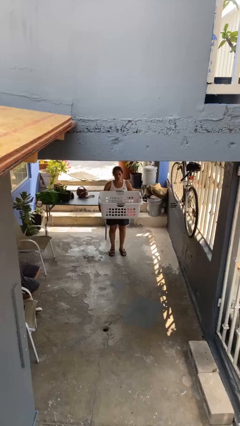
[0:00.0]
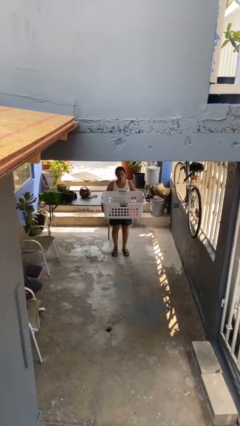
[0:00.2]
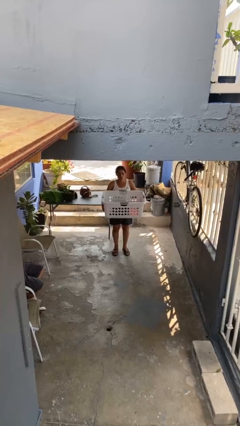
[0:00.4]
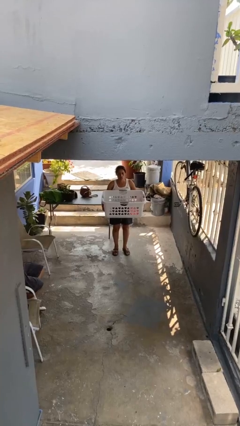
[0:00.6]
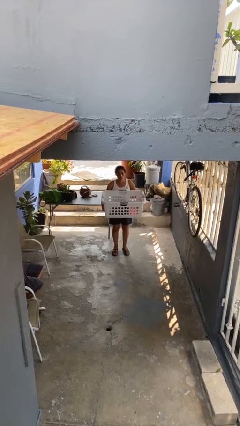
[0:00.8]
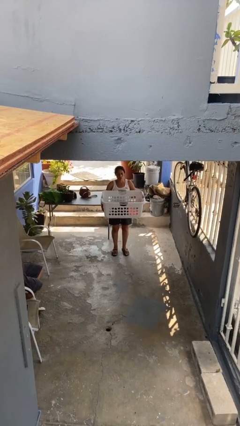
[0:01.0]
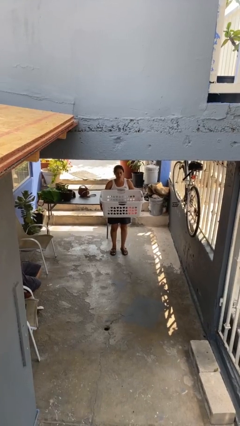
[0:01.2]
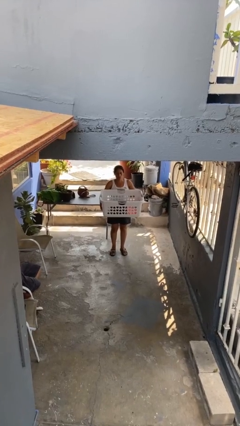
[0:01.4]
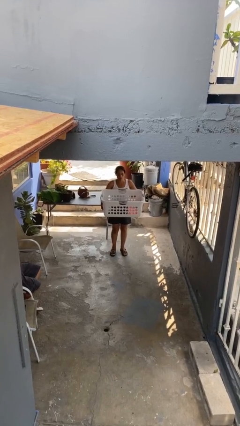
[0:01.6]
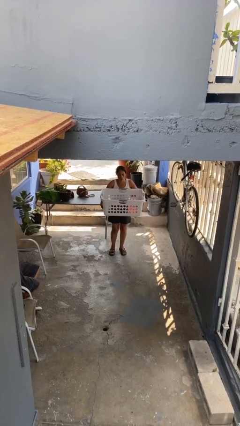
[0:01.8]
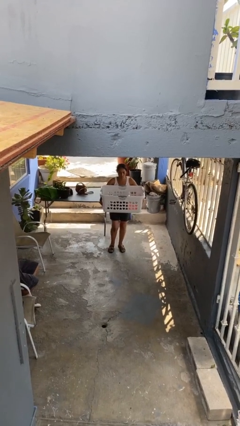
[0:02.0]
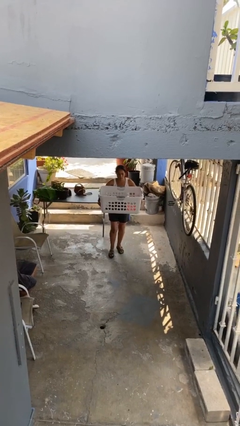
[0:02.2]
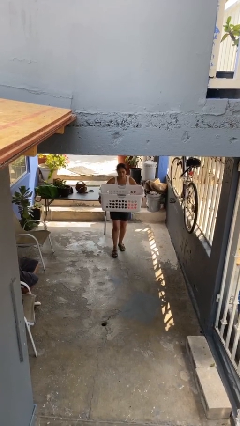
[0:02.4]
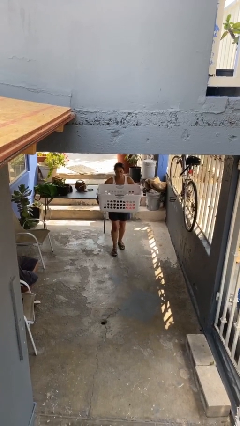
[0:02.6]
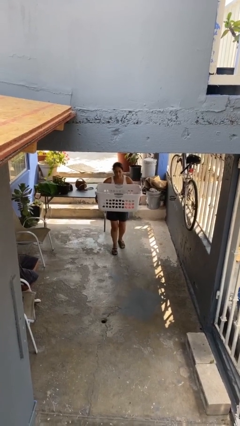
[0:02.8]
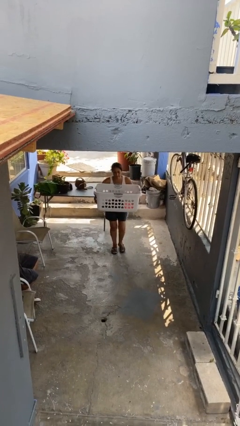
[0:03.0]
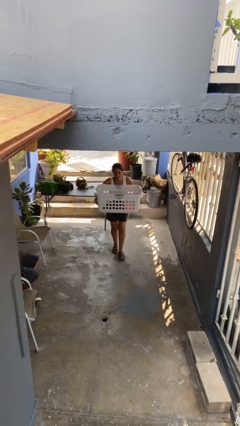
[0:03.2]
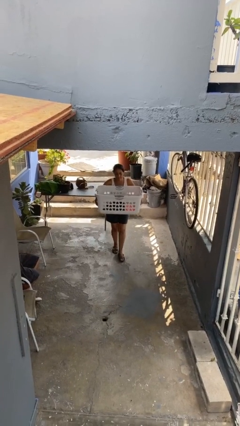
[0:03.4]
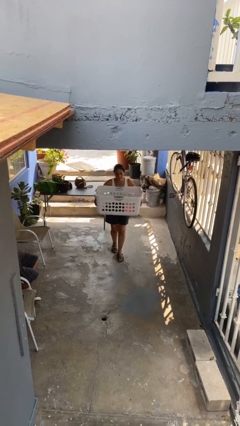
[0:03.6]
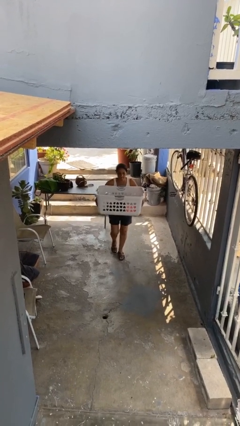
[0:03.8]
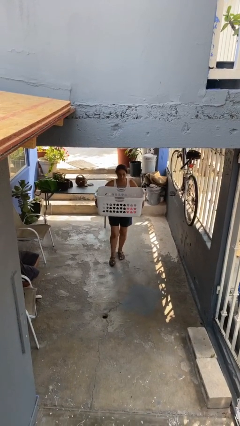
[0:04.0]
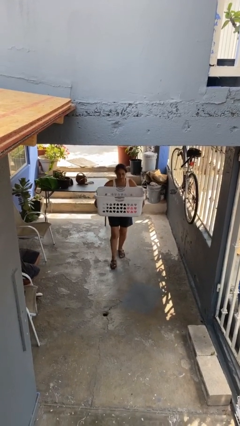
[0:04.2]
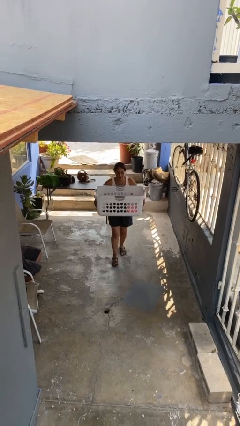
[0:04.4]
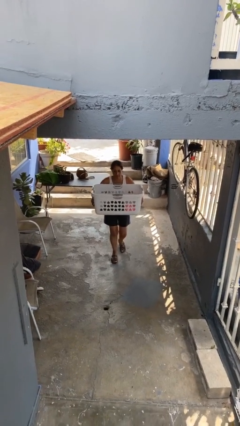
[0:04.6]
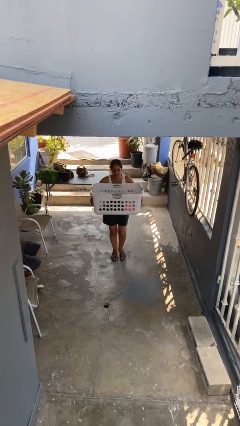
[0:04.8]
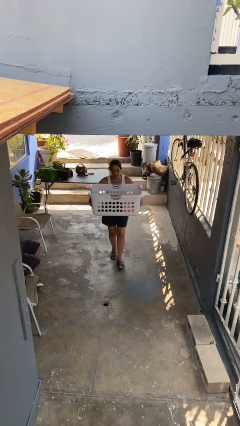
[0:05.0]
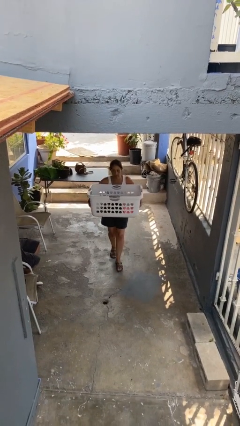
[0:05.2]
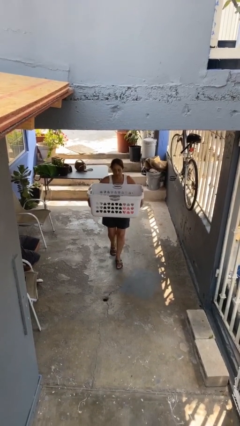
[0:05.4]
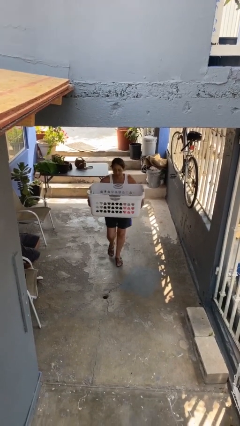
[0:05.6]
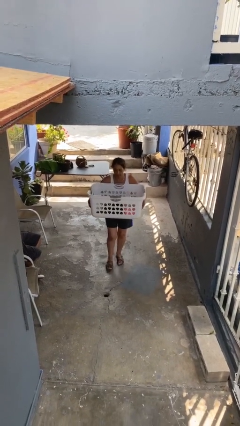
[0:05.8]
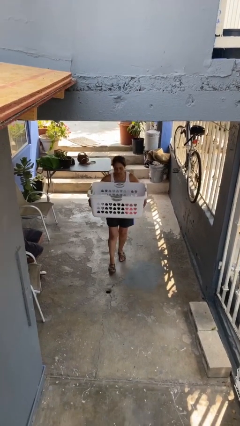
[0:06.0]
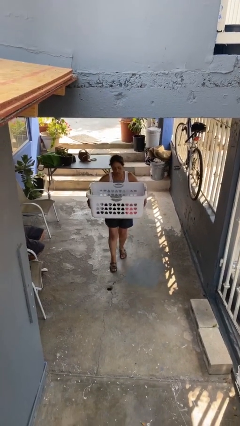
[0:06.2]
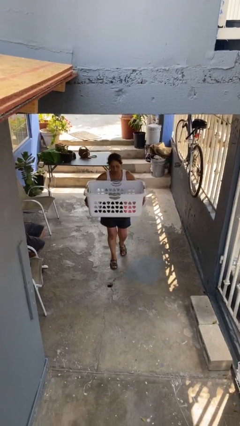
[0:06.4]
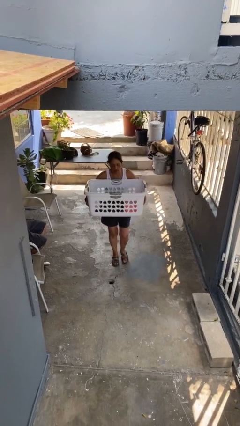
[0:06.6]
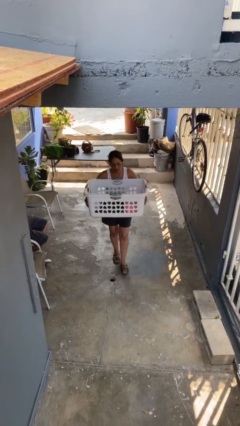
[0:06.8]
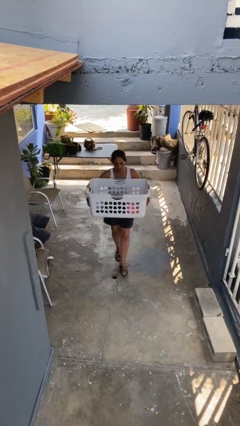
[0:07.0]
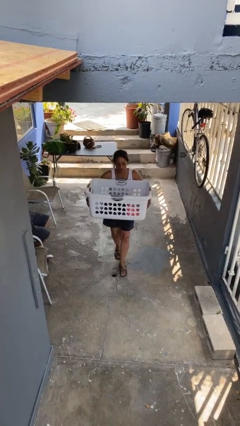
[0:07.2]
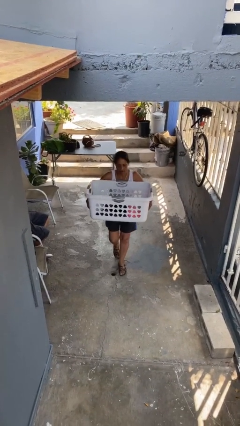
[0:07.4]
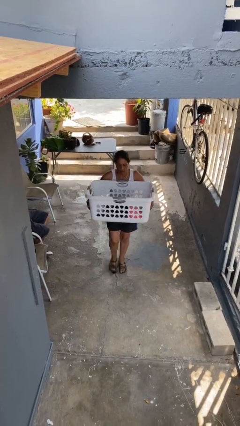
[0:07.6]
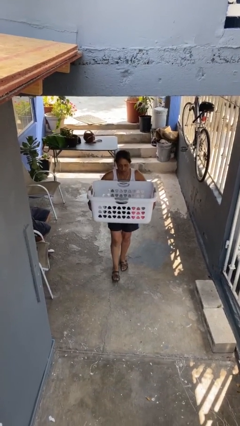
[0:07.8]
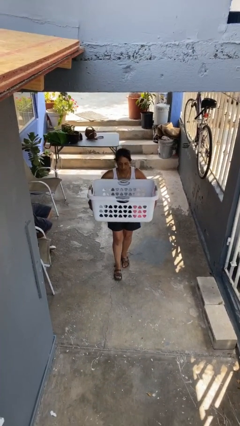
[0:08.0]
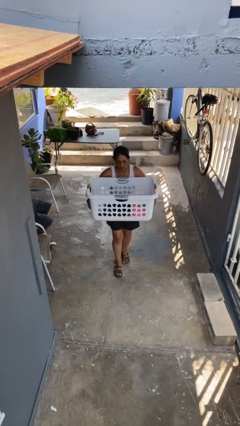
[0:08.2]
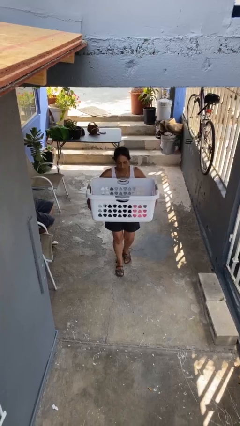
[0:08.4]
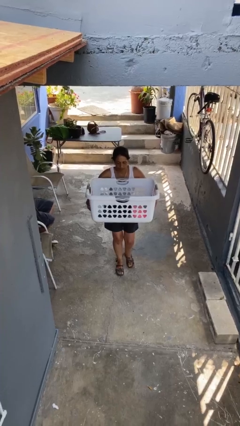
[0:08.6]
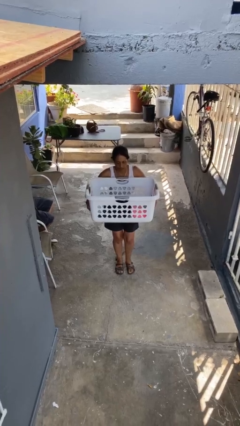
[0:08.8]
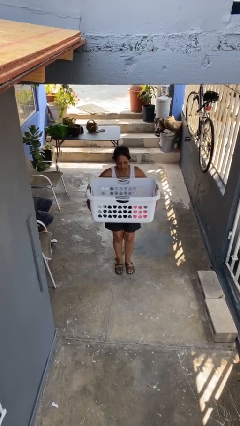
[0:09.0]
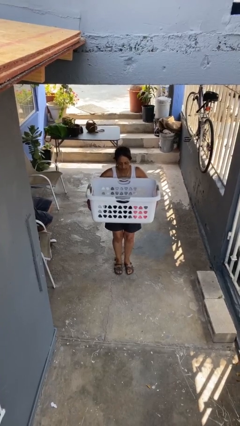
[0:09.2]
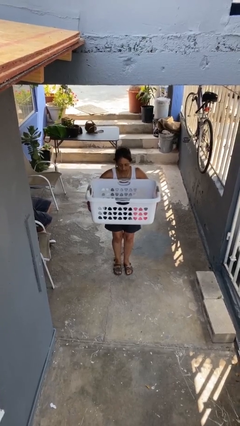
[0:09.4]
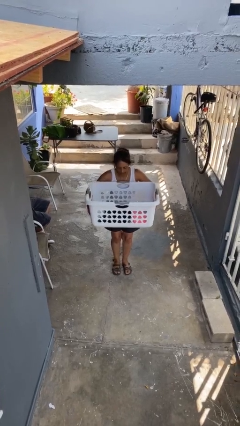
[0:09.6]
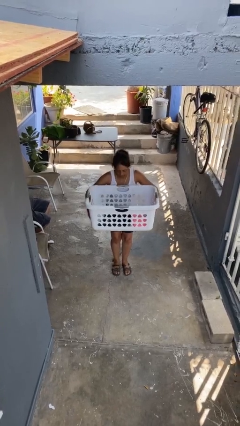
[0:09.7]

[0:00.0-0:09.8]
person carries heavy object

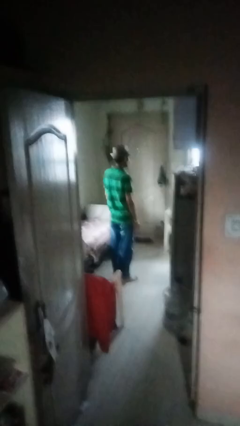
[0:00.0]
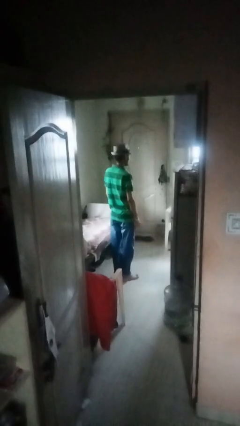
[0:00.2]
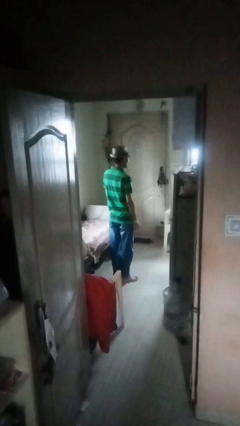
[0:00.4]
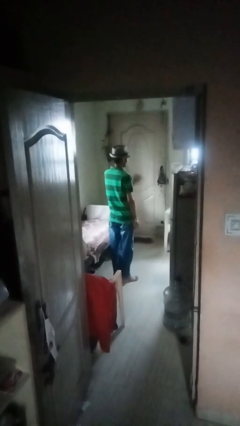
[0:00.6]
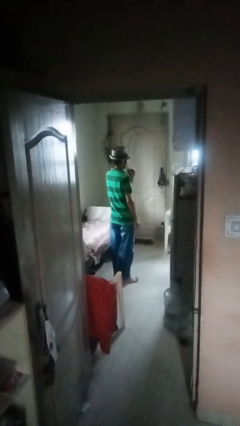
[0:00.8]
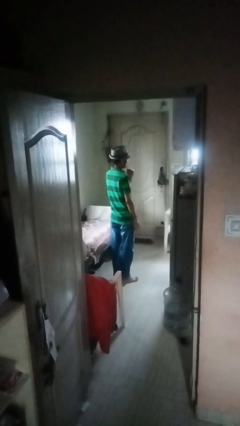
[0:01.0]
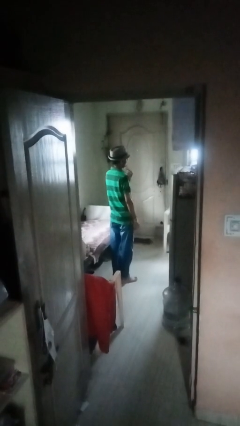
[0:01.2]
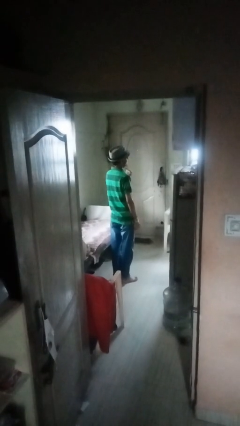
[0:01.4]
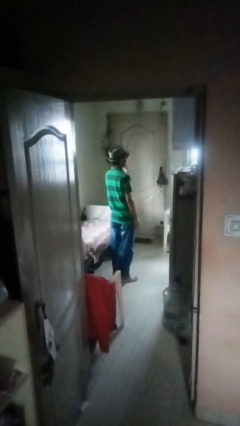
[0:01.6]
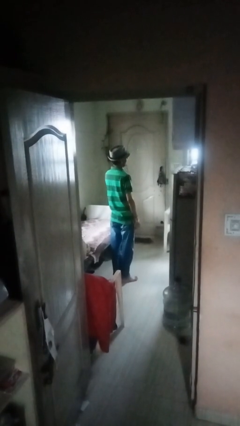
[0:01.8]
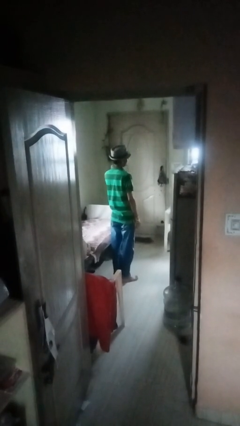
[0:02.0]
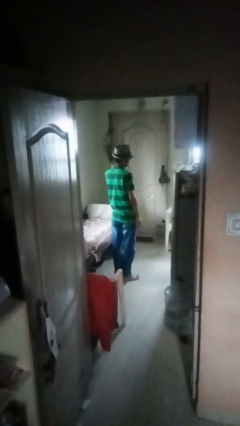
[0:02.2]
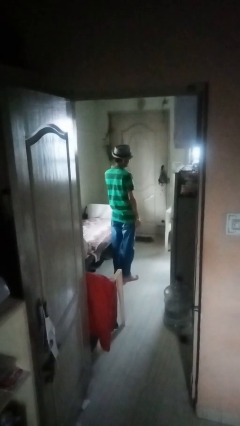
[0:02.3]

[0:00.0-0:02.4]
person gestures cut

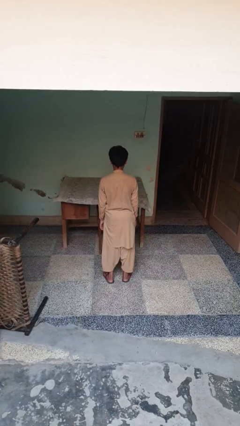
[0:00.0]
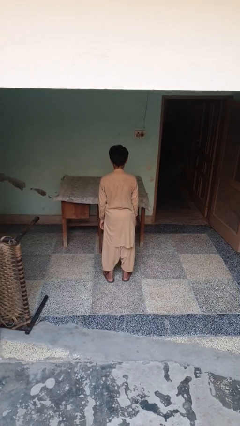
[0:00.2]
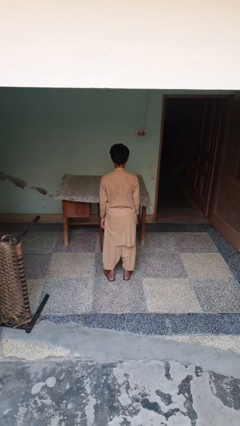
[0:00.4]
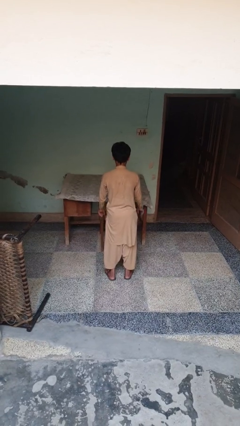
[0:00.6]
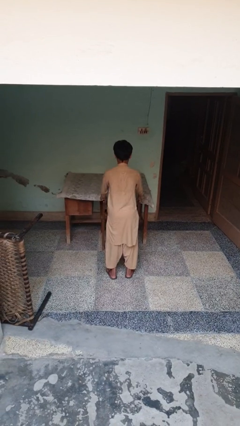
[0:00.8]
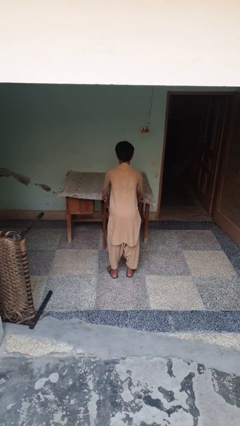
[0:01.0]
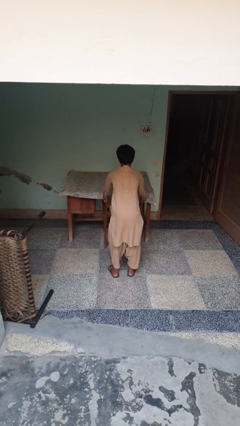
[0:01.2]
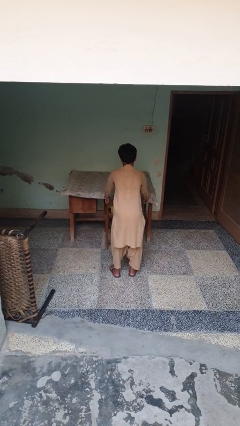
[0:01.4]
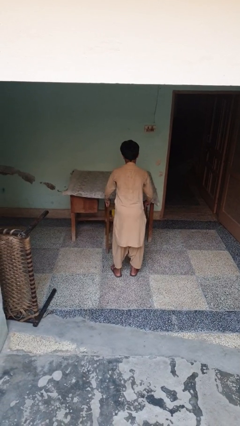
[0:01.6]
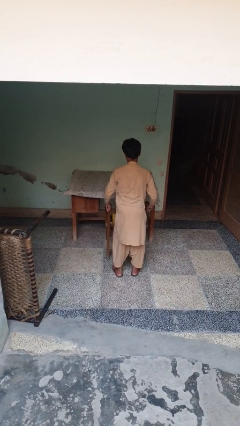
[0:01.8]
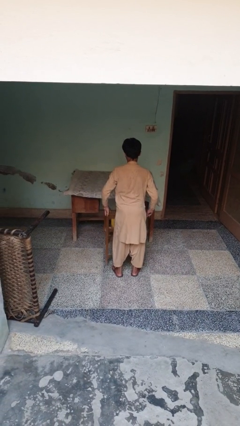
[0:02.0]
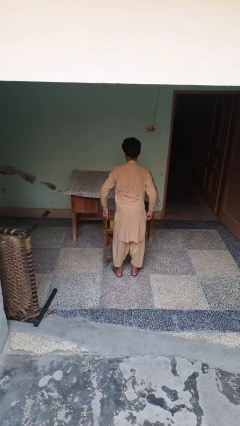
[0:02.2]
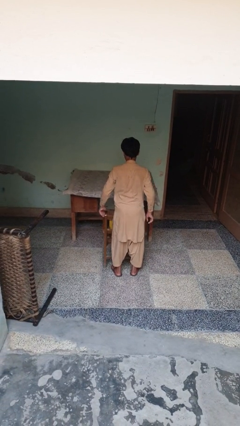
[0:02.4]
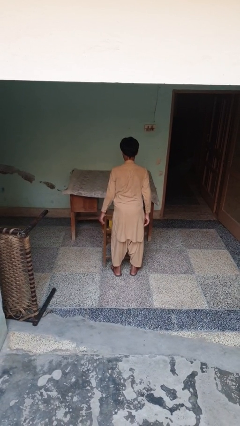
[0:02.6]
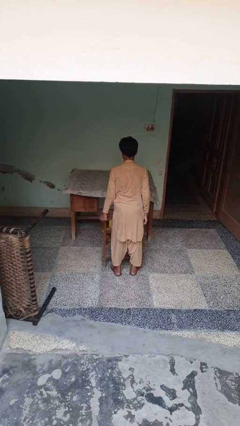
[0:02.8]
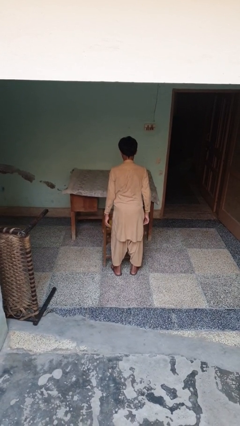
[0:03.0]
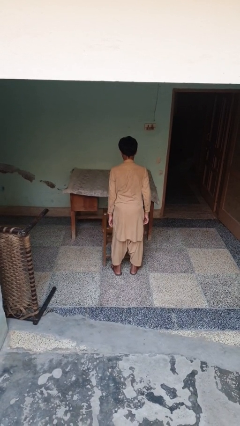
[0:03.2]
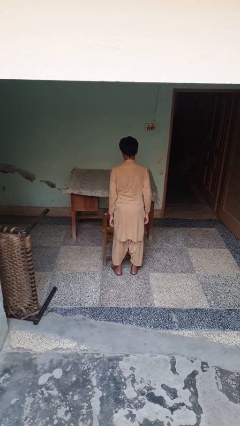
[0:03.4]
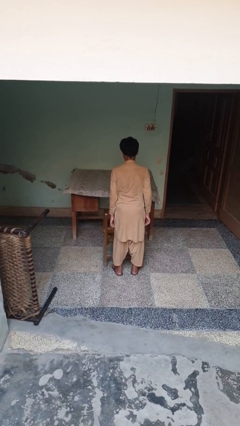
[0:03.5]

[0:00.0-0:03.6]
person pulls out chair

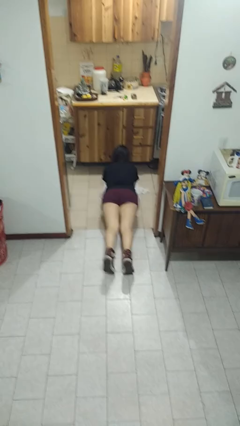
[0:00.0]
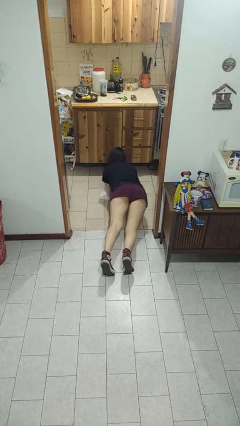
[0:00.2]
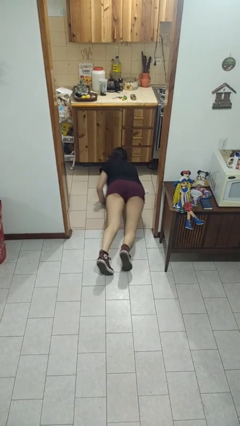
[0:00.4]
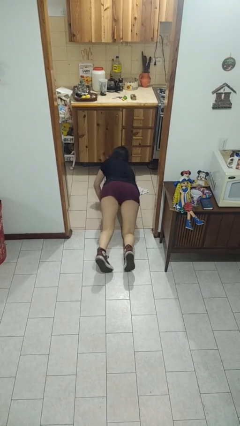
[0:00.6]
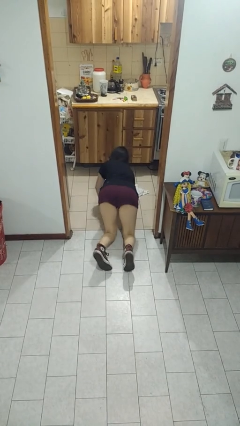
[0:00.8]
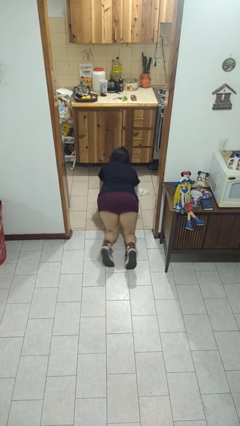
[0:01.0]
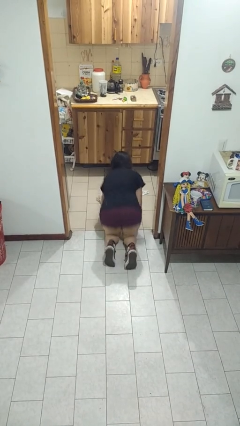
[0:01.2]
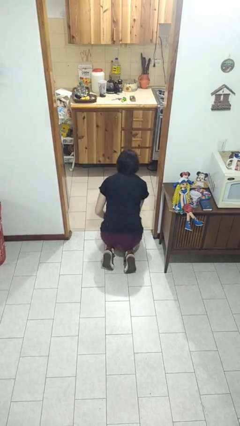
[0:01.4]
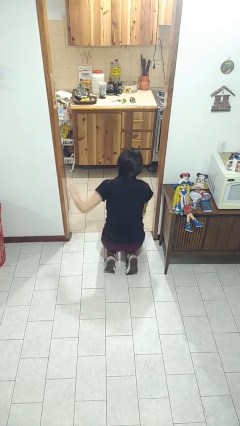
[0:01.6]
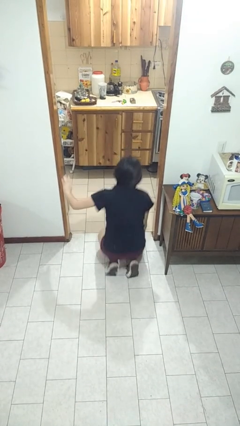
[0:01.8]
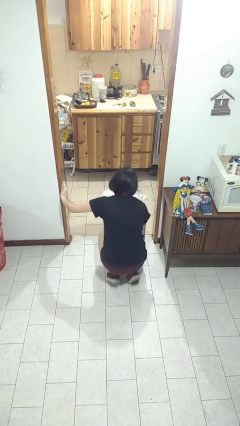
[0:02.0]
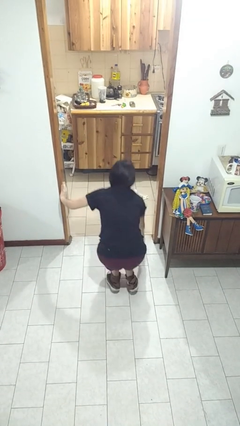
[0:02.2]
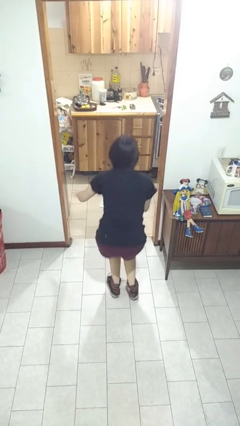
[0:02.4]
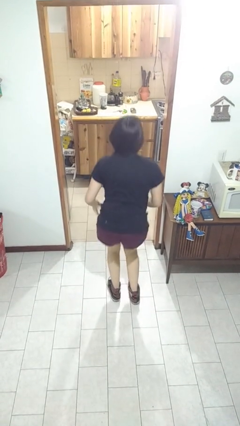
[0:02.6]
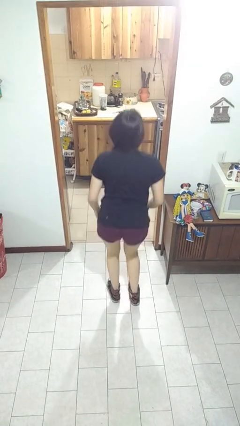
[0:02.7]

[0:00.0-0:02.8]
person stands up from floor
